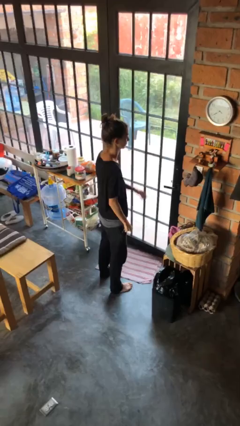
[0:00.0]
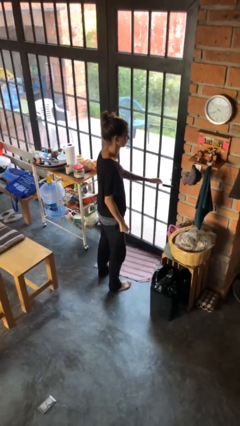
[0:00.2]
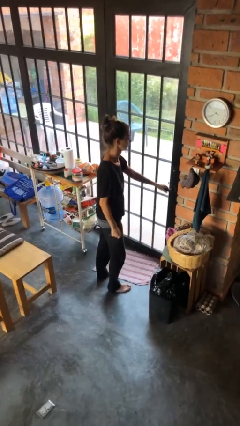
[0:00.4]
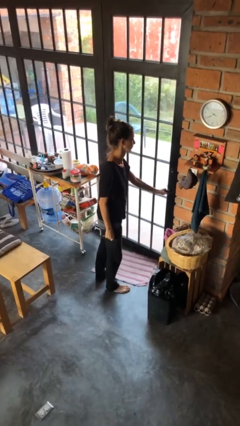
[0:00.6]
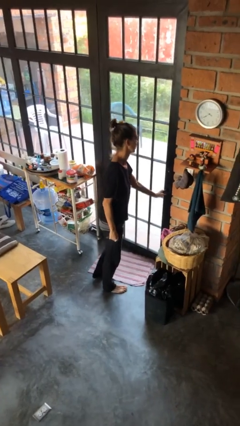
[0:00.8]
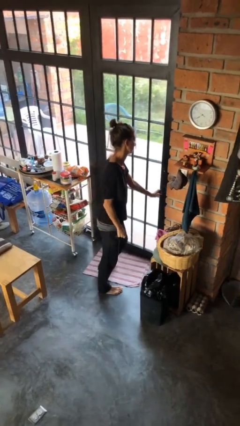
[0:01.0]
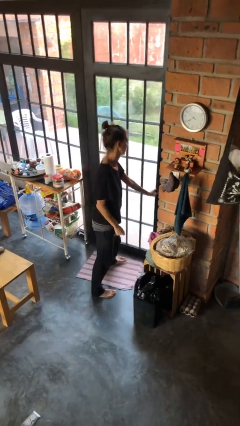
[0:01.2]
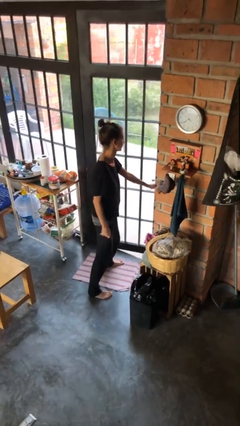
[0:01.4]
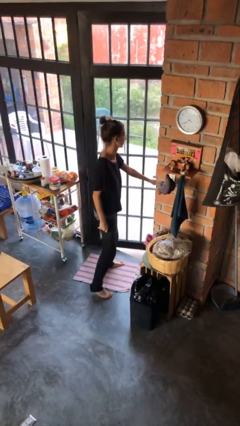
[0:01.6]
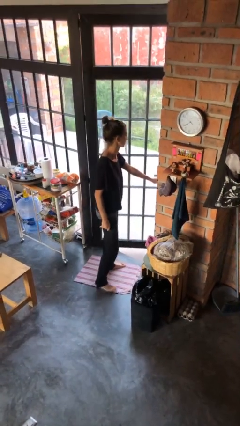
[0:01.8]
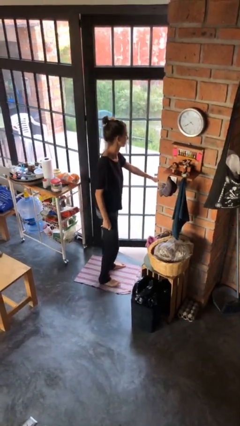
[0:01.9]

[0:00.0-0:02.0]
person opens facility door

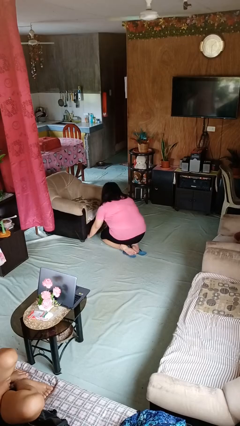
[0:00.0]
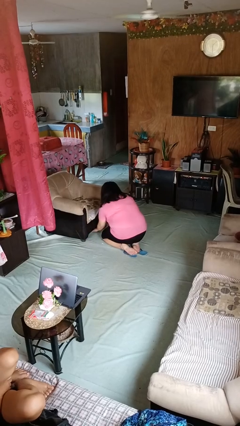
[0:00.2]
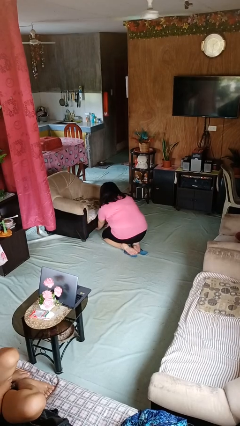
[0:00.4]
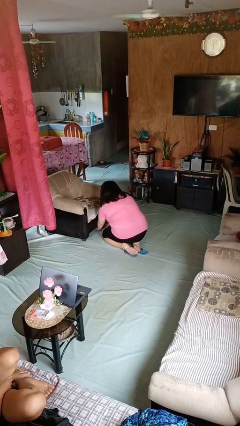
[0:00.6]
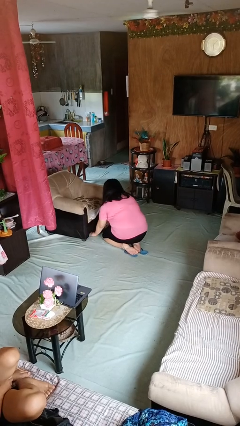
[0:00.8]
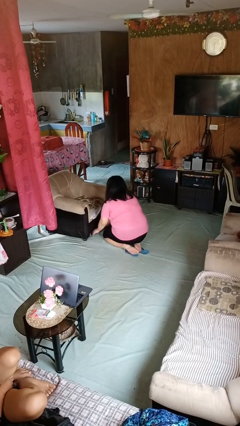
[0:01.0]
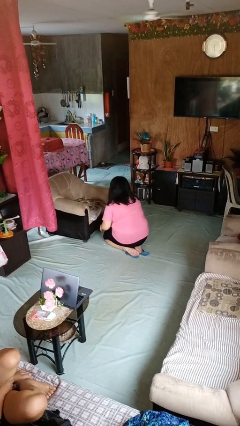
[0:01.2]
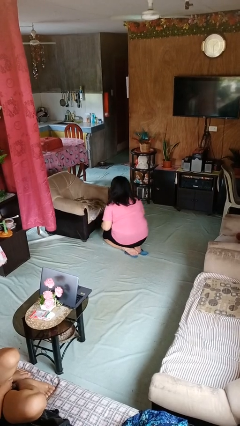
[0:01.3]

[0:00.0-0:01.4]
person searches under couch

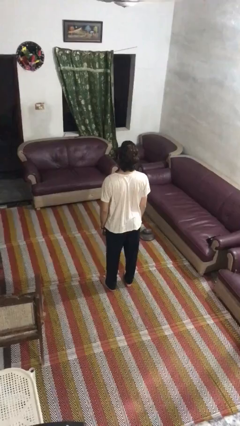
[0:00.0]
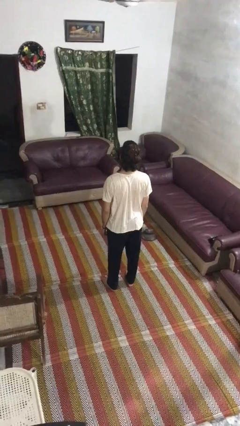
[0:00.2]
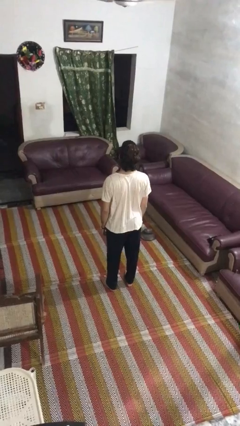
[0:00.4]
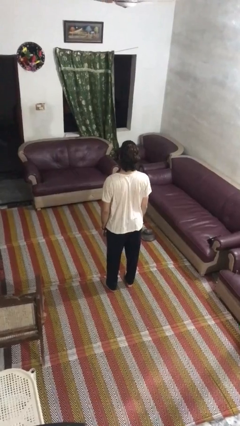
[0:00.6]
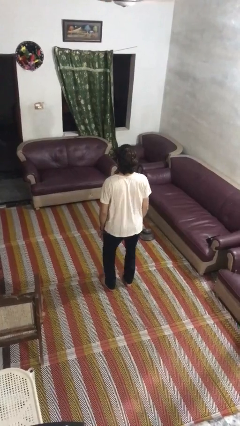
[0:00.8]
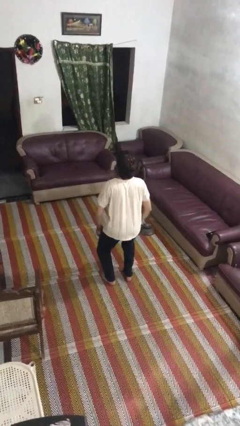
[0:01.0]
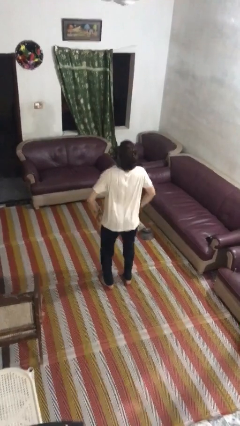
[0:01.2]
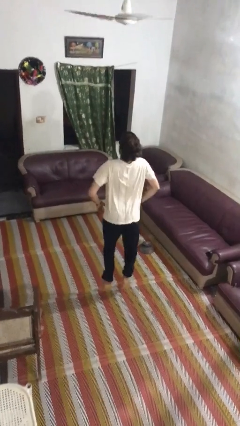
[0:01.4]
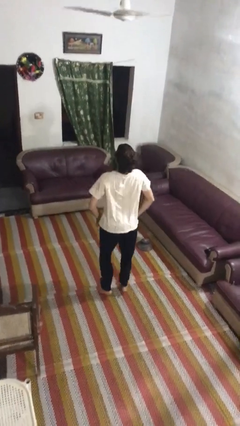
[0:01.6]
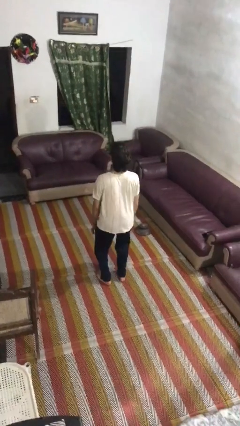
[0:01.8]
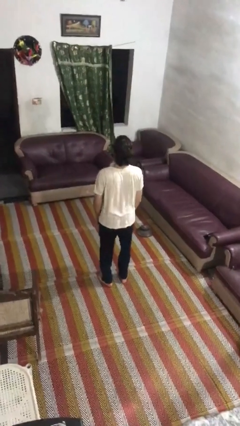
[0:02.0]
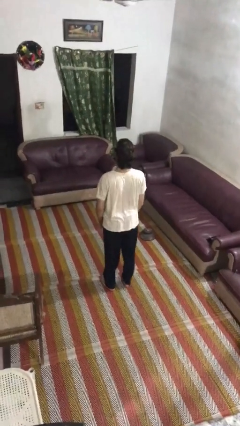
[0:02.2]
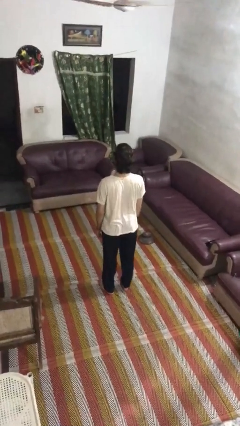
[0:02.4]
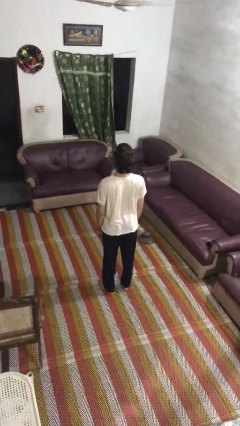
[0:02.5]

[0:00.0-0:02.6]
person jumps

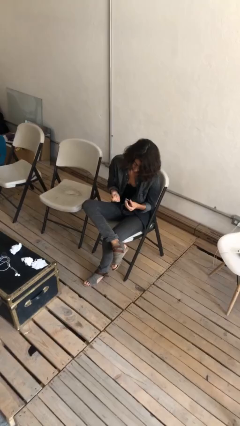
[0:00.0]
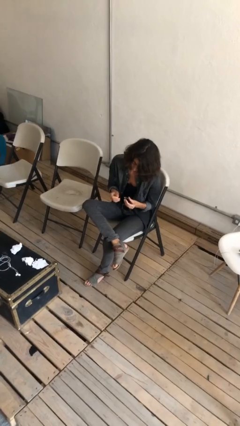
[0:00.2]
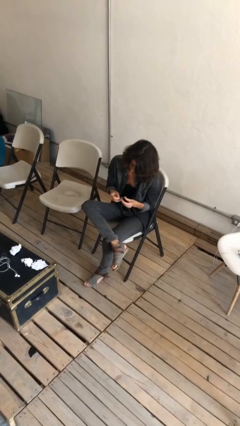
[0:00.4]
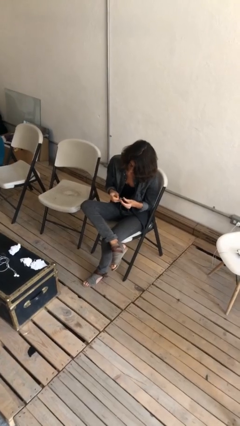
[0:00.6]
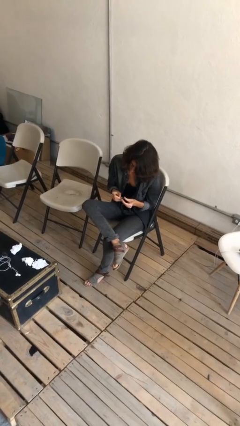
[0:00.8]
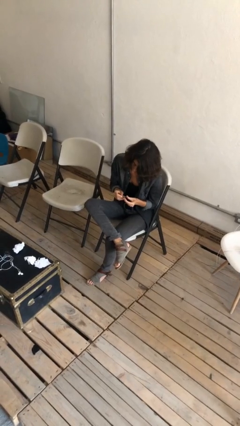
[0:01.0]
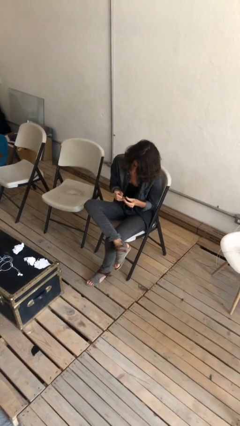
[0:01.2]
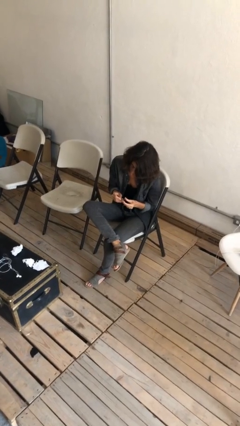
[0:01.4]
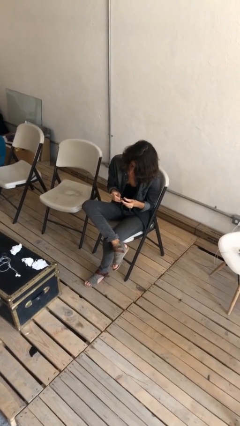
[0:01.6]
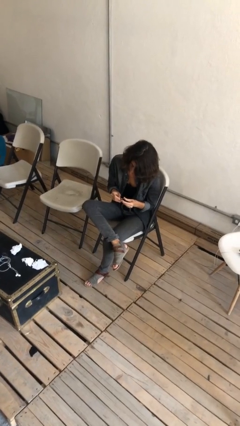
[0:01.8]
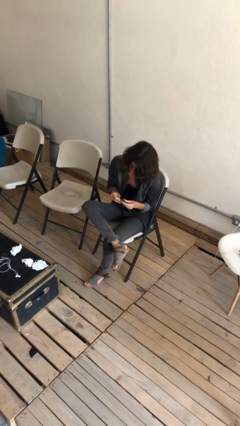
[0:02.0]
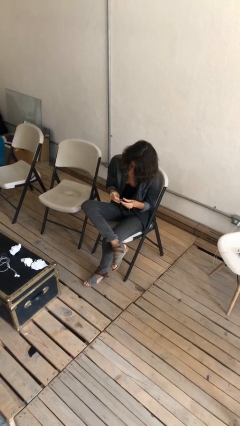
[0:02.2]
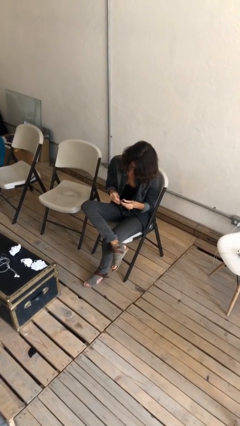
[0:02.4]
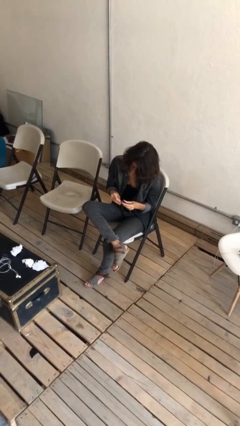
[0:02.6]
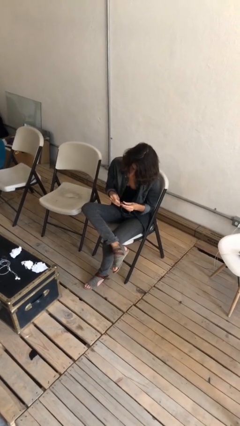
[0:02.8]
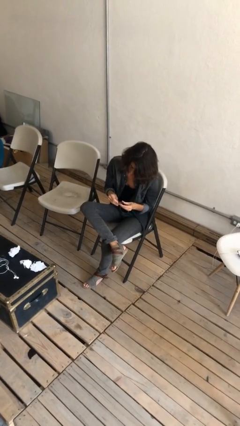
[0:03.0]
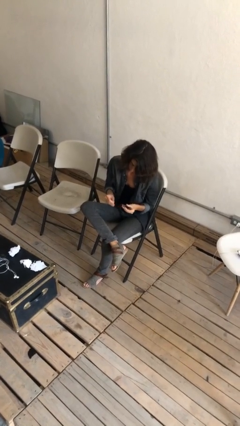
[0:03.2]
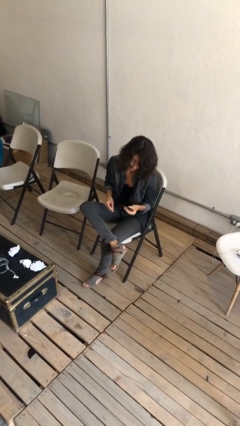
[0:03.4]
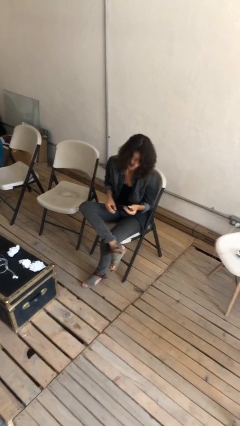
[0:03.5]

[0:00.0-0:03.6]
person clips fingernails

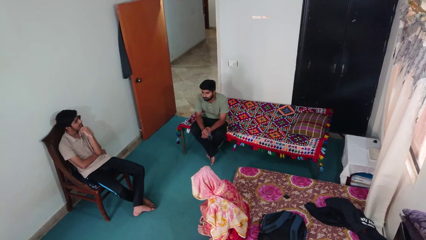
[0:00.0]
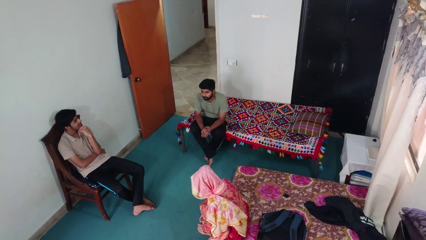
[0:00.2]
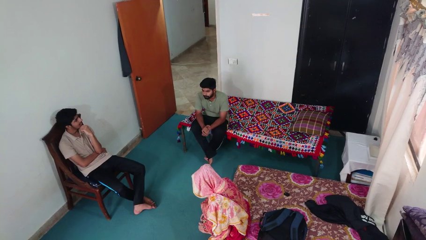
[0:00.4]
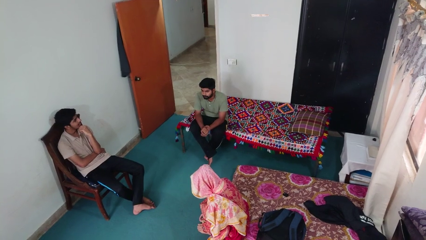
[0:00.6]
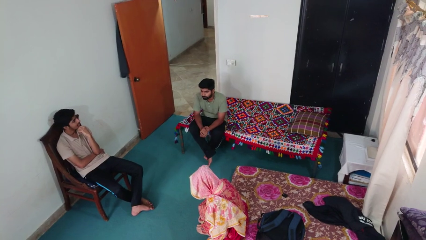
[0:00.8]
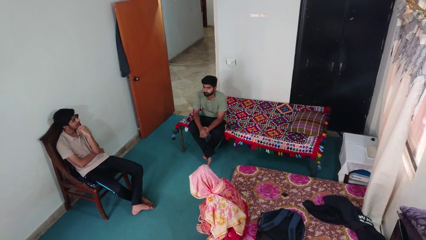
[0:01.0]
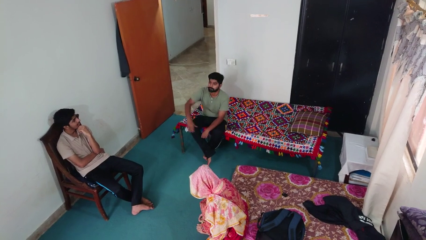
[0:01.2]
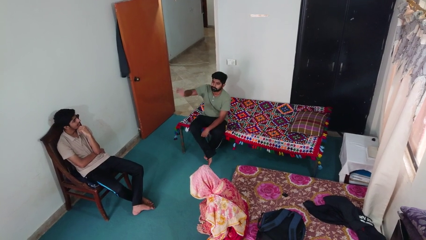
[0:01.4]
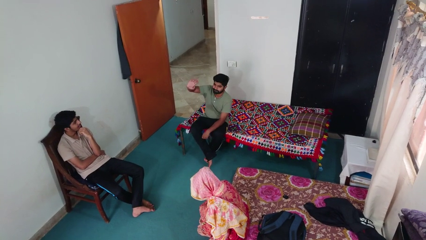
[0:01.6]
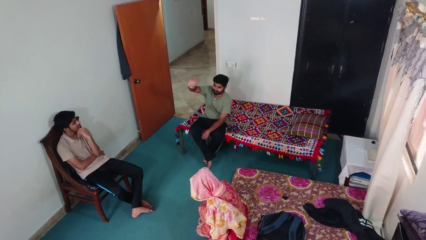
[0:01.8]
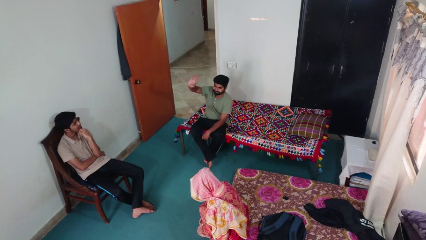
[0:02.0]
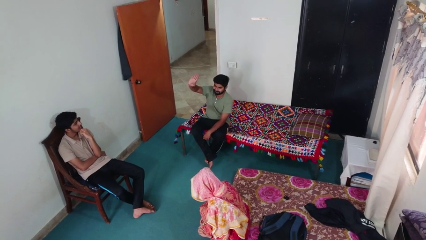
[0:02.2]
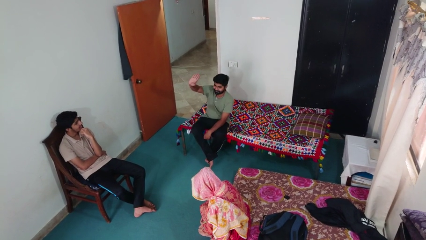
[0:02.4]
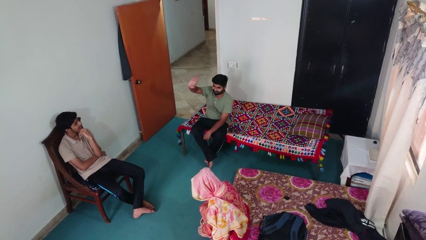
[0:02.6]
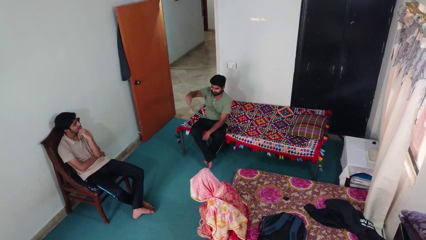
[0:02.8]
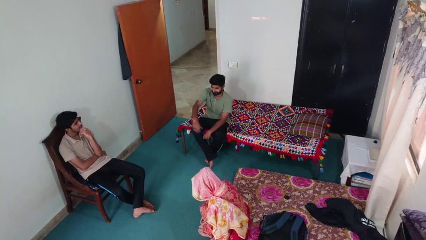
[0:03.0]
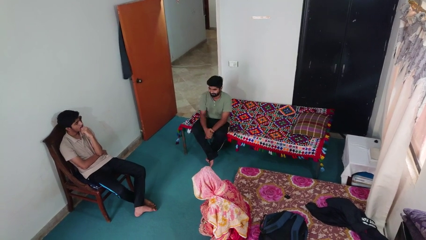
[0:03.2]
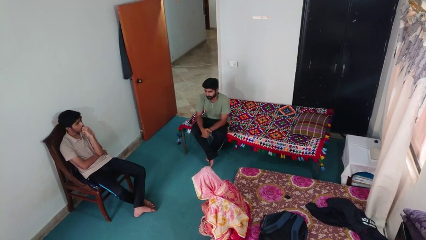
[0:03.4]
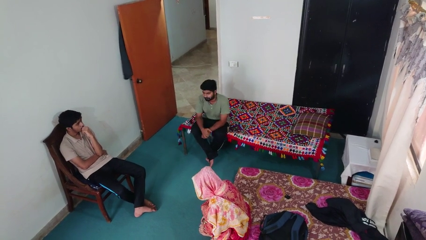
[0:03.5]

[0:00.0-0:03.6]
person waves at person

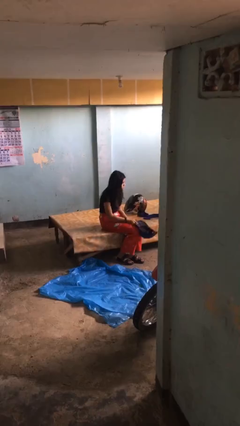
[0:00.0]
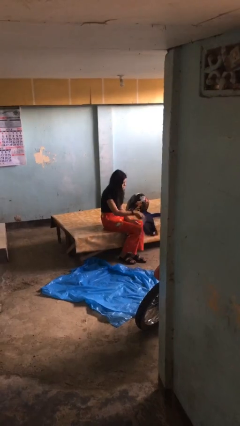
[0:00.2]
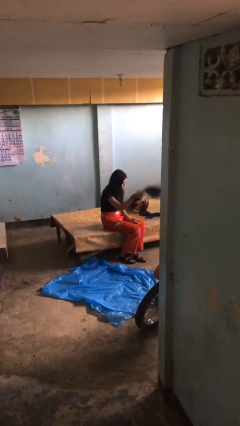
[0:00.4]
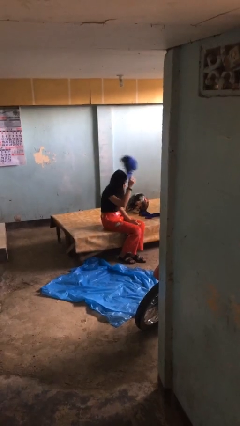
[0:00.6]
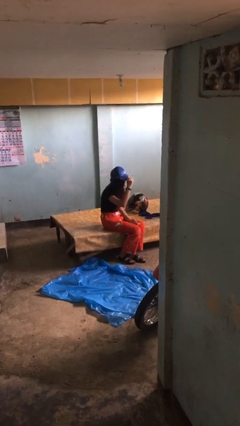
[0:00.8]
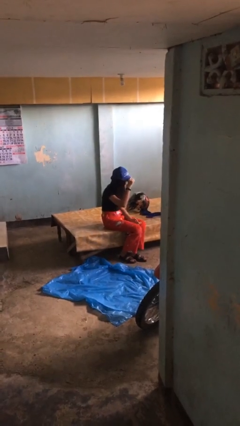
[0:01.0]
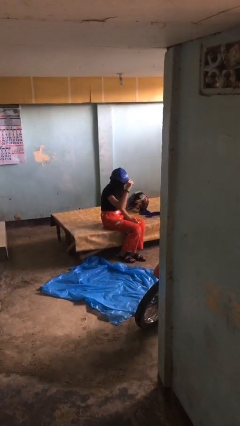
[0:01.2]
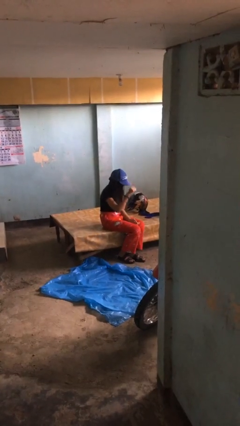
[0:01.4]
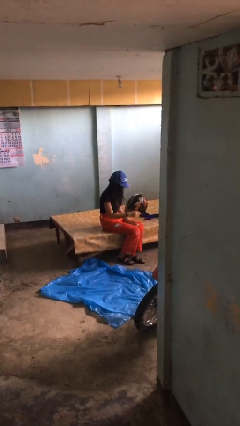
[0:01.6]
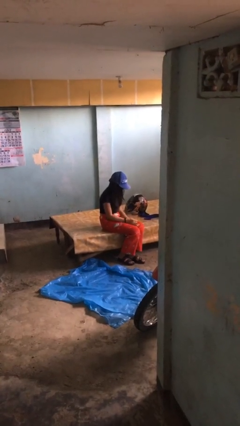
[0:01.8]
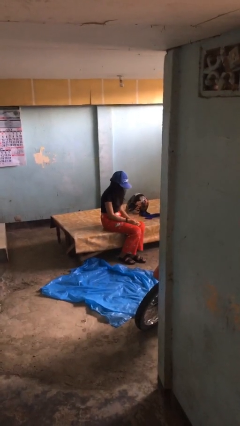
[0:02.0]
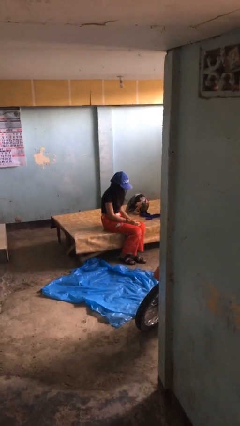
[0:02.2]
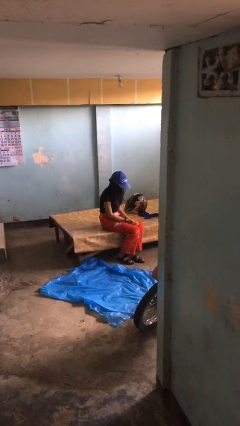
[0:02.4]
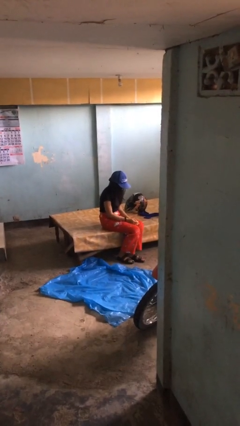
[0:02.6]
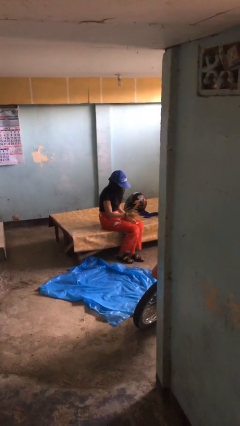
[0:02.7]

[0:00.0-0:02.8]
person puts on hat

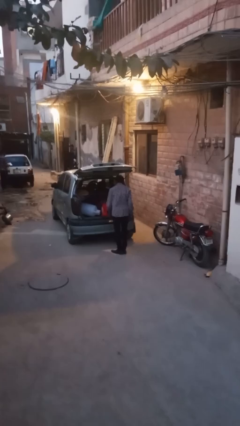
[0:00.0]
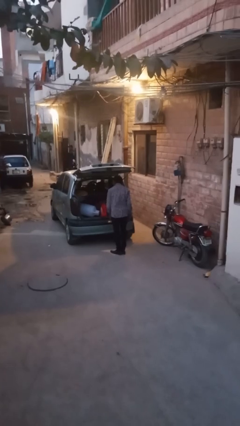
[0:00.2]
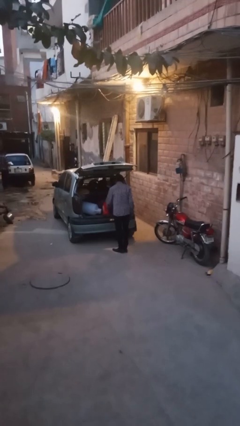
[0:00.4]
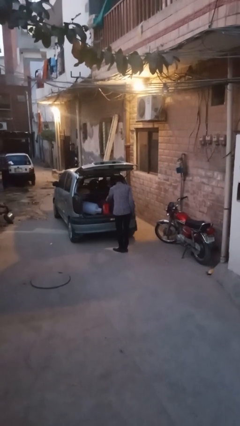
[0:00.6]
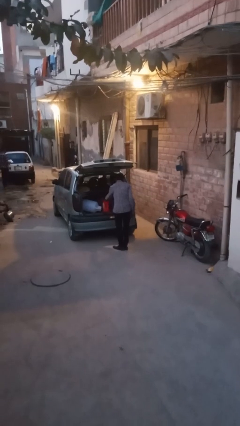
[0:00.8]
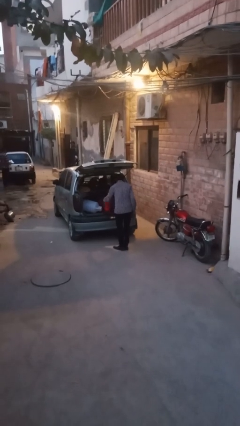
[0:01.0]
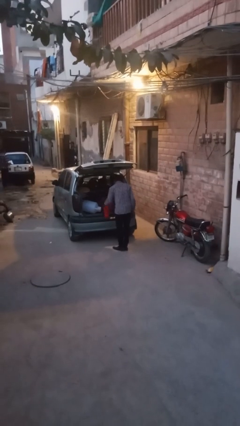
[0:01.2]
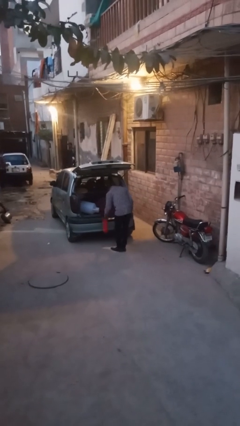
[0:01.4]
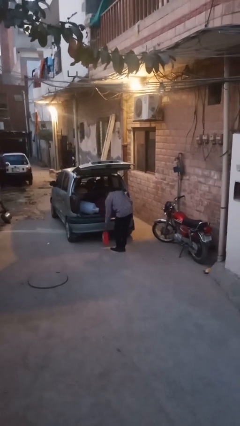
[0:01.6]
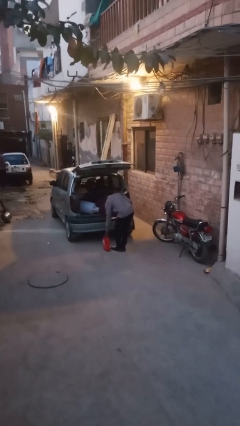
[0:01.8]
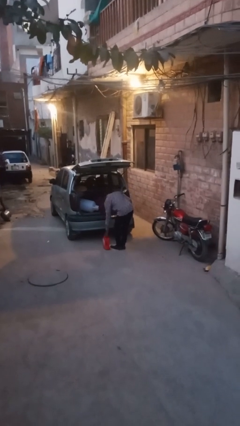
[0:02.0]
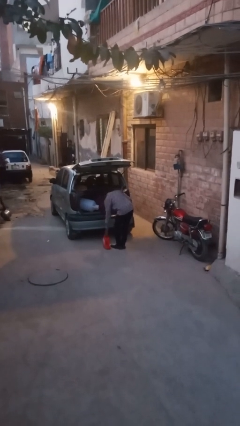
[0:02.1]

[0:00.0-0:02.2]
person unloads car
